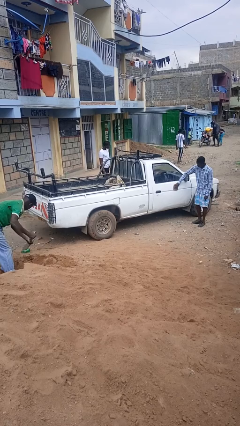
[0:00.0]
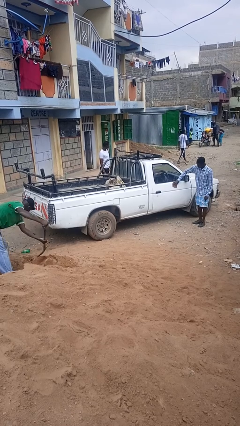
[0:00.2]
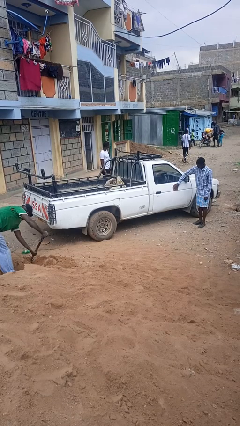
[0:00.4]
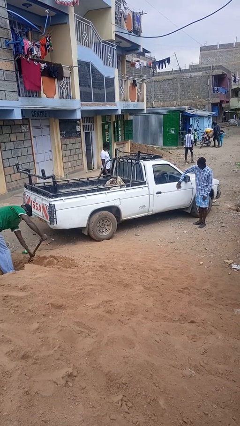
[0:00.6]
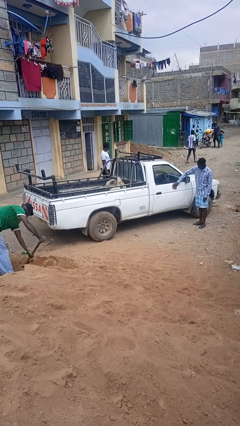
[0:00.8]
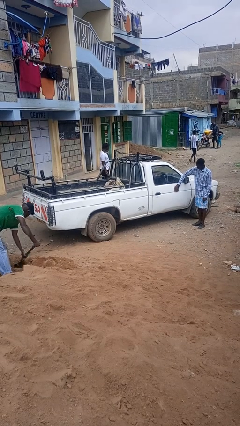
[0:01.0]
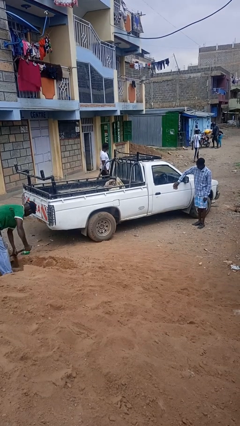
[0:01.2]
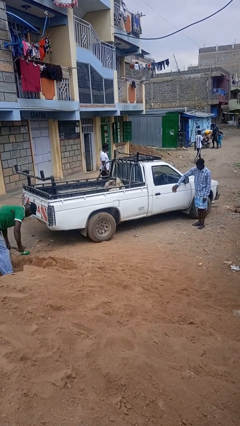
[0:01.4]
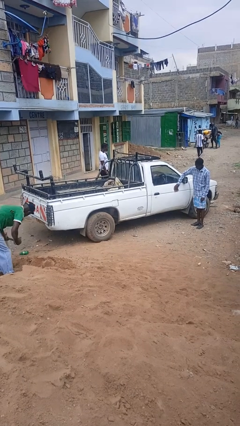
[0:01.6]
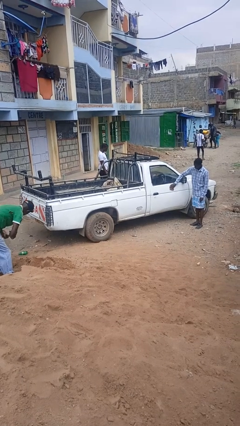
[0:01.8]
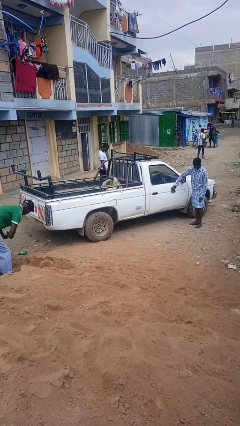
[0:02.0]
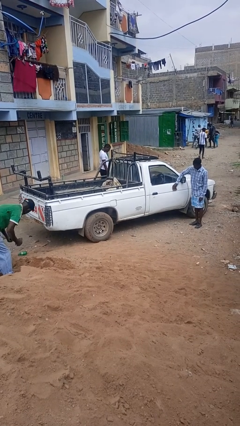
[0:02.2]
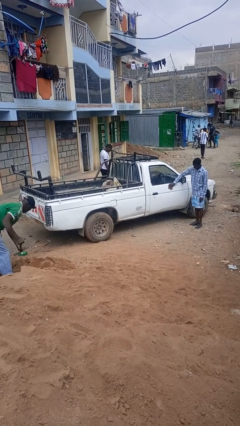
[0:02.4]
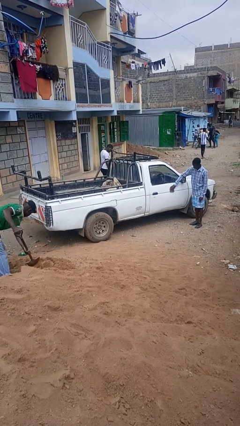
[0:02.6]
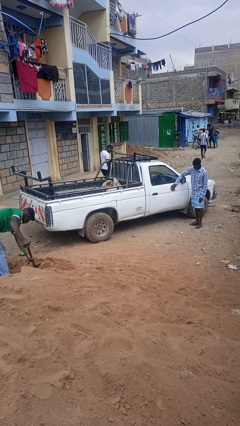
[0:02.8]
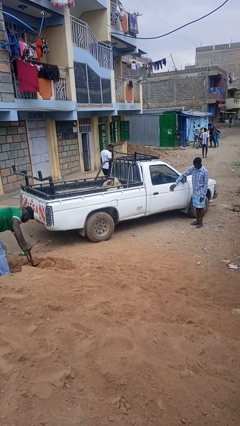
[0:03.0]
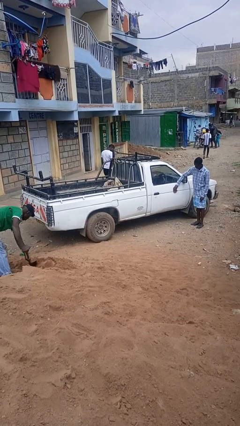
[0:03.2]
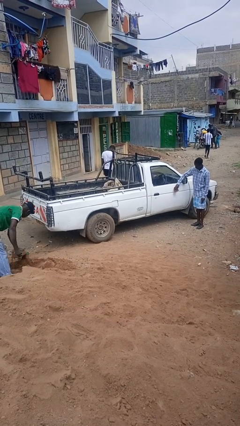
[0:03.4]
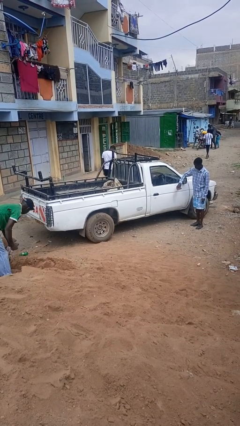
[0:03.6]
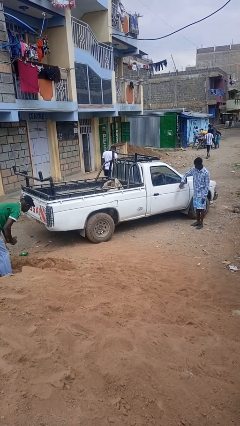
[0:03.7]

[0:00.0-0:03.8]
person polishes car with rag

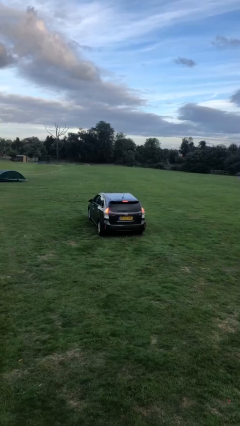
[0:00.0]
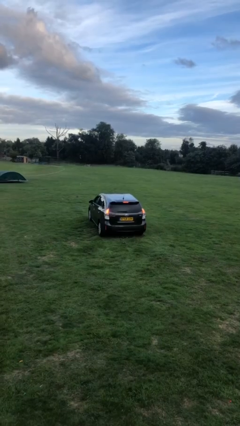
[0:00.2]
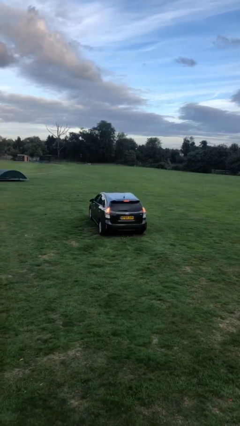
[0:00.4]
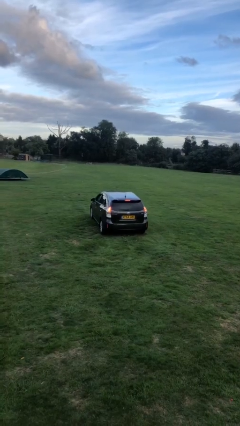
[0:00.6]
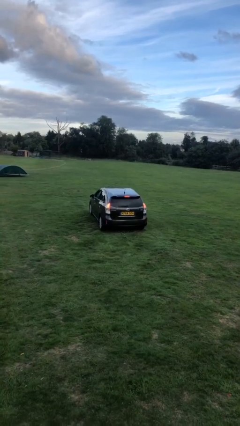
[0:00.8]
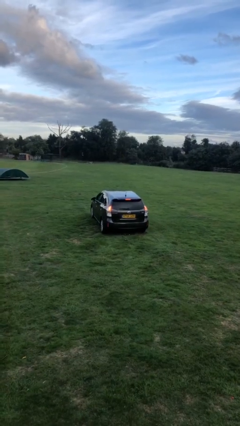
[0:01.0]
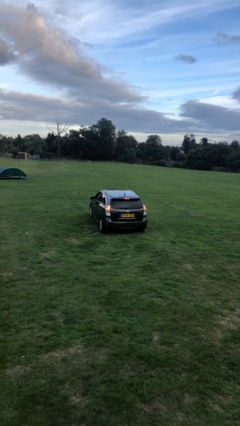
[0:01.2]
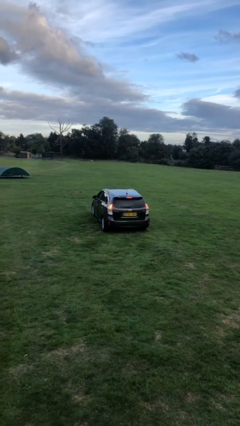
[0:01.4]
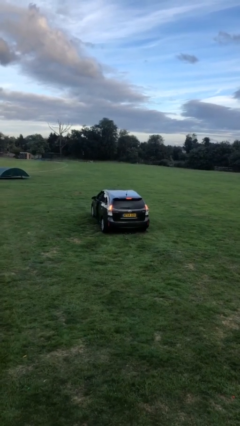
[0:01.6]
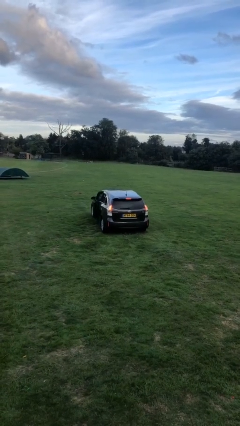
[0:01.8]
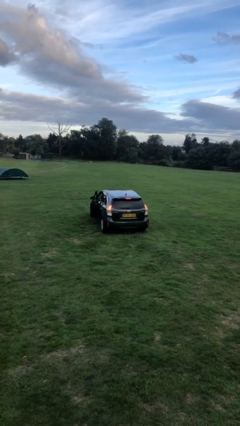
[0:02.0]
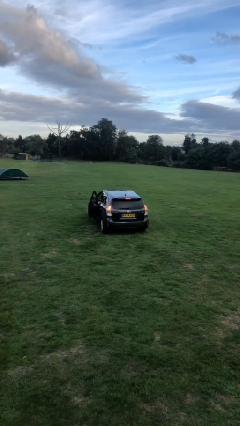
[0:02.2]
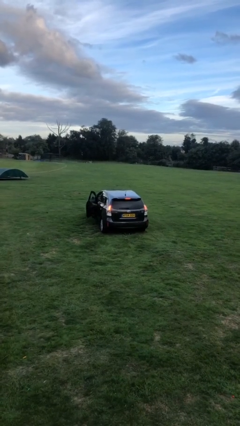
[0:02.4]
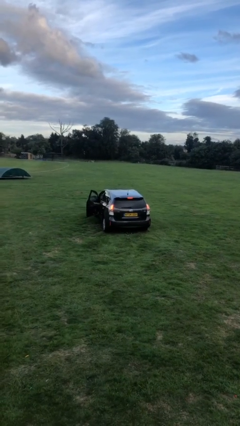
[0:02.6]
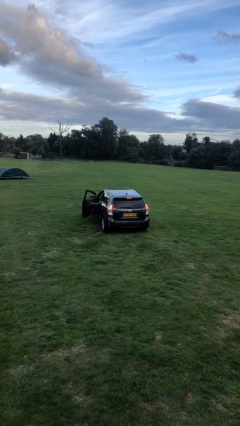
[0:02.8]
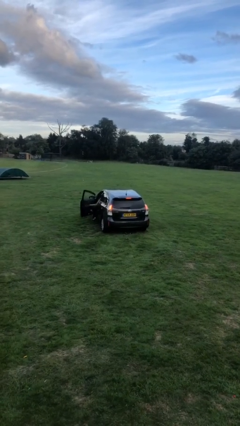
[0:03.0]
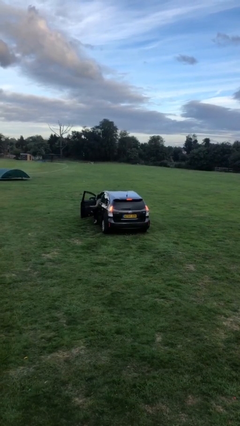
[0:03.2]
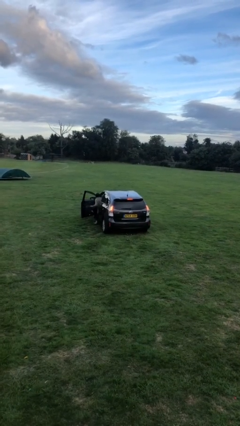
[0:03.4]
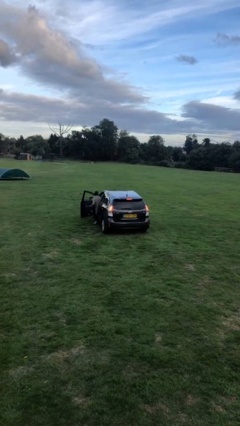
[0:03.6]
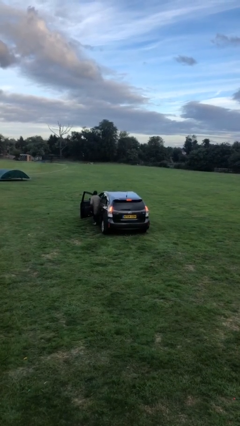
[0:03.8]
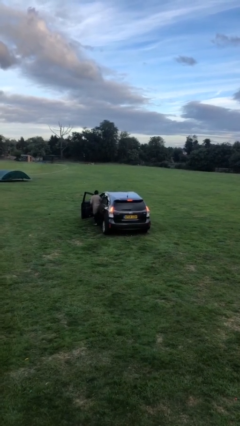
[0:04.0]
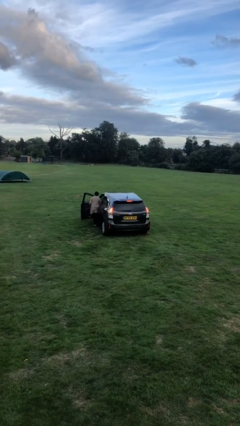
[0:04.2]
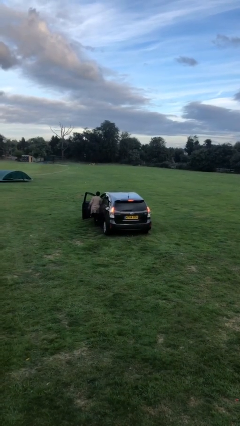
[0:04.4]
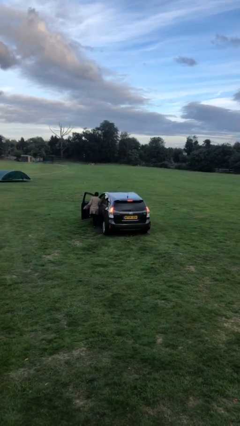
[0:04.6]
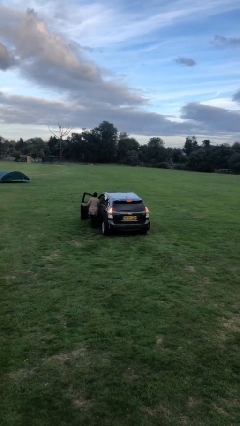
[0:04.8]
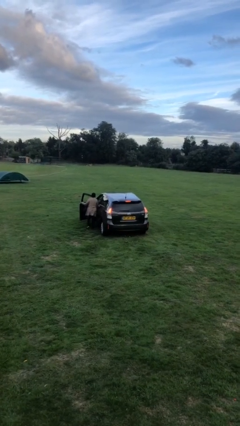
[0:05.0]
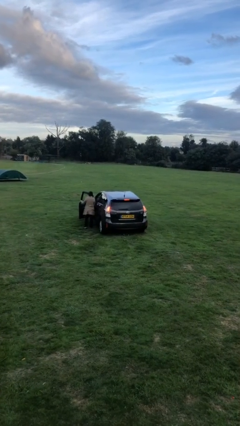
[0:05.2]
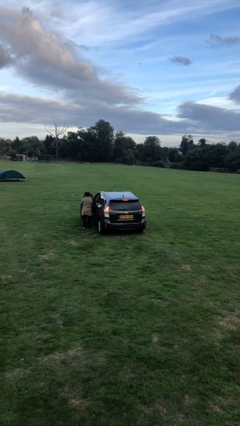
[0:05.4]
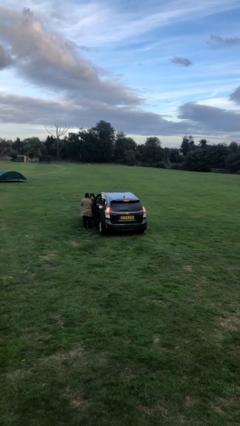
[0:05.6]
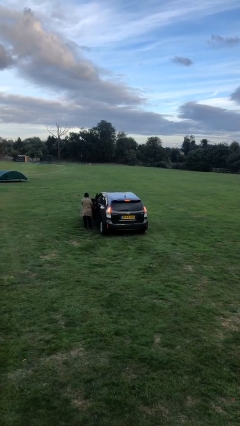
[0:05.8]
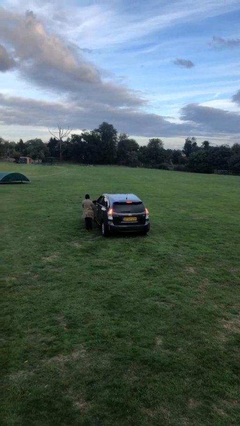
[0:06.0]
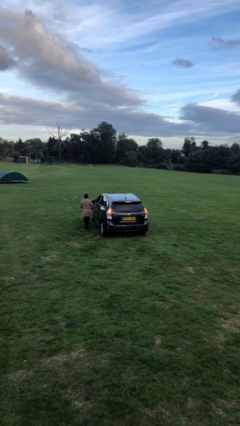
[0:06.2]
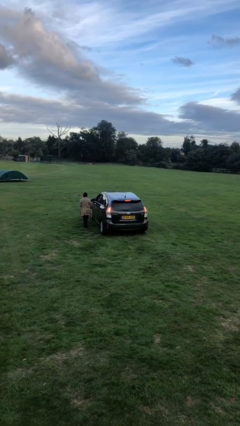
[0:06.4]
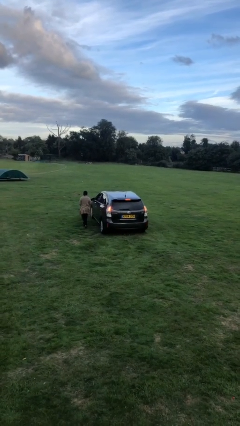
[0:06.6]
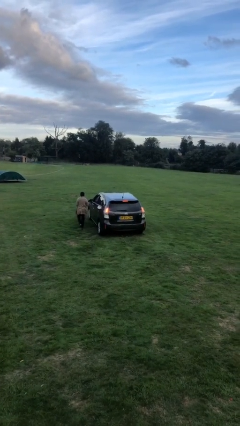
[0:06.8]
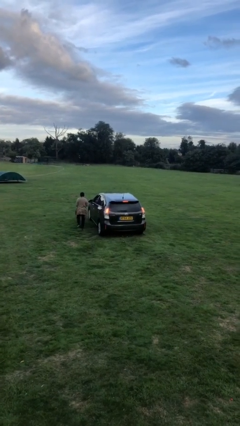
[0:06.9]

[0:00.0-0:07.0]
car drops off person

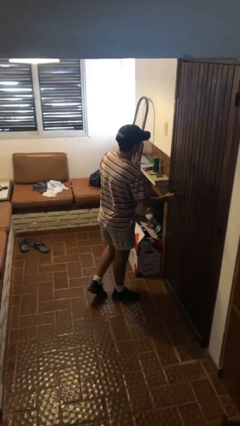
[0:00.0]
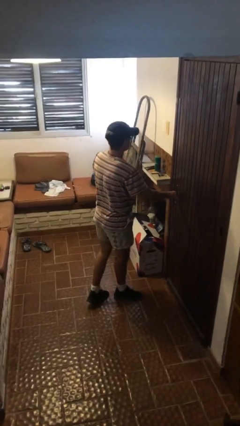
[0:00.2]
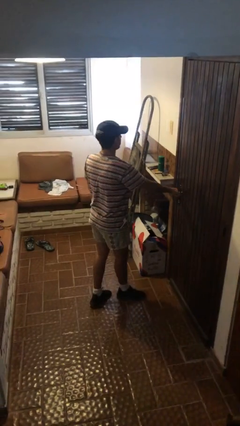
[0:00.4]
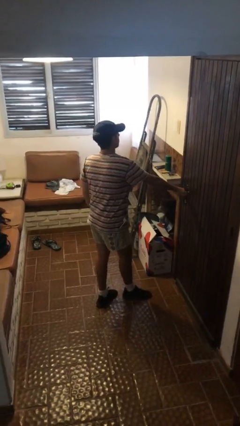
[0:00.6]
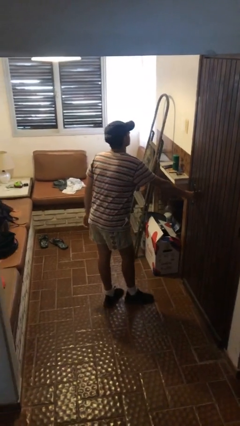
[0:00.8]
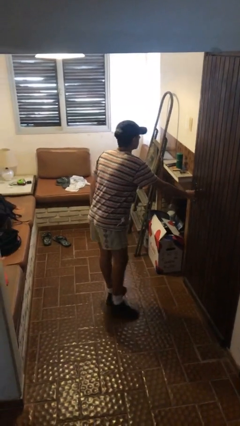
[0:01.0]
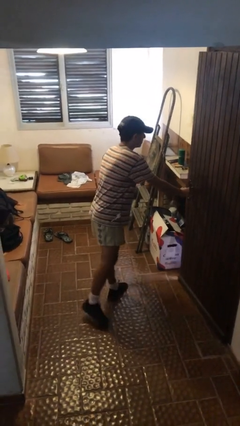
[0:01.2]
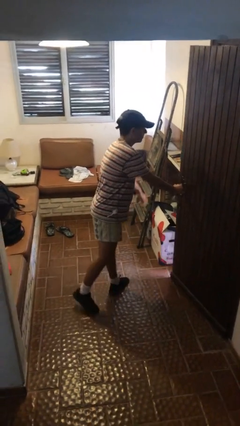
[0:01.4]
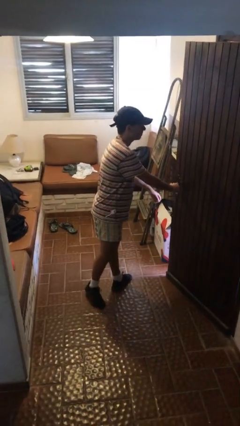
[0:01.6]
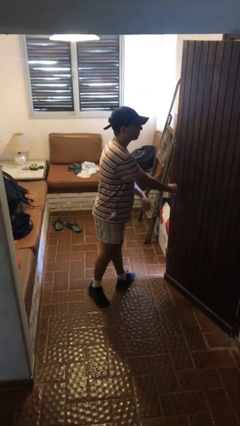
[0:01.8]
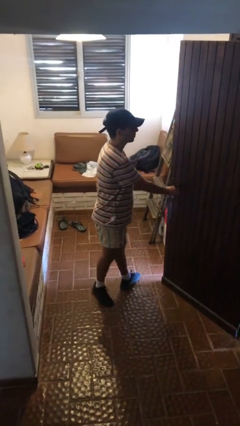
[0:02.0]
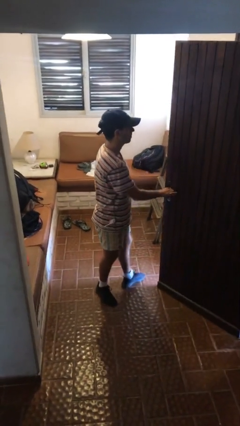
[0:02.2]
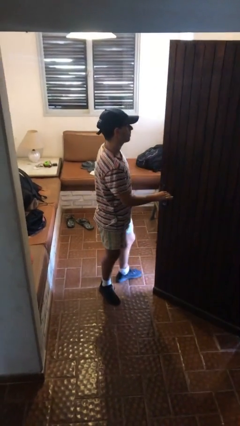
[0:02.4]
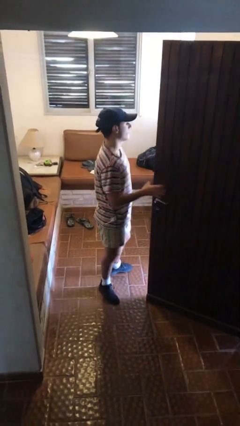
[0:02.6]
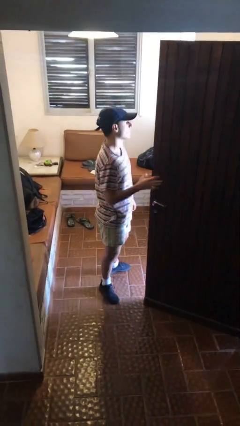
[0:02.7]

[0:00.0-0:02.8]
person opens facility door

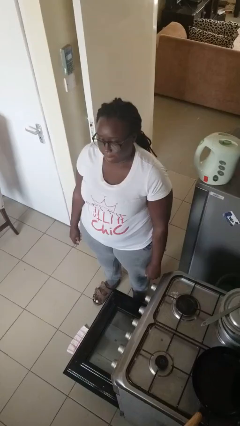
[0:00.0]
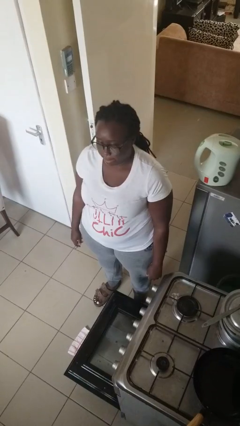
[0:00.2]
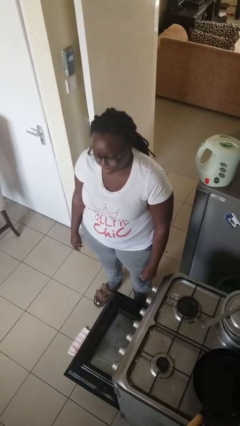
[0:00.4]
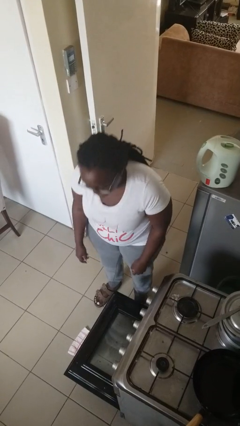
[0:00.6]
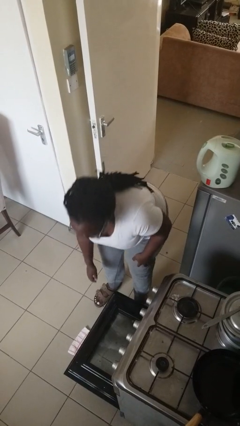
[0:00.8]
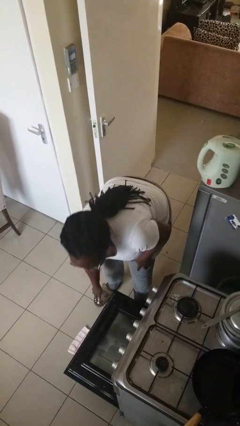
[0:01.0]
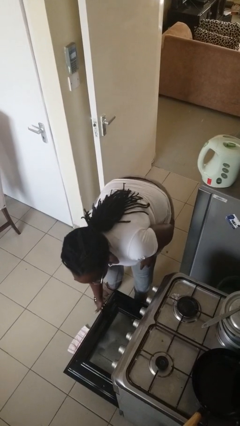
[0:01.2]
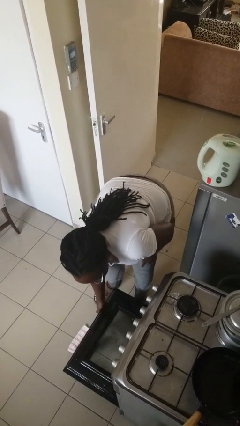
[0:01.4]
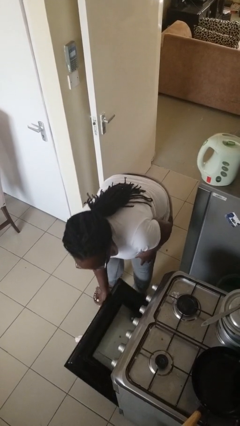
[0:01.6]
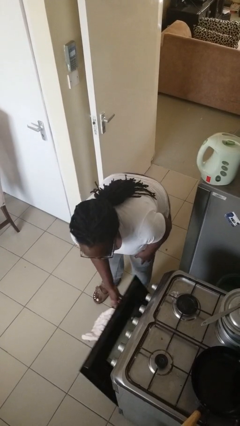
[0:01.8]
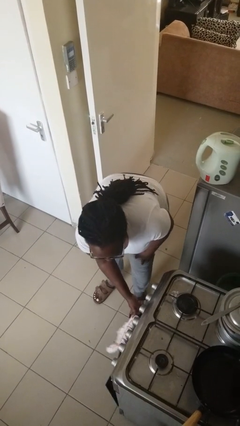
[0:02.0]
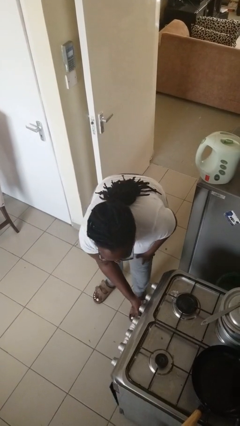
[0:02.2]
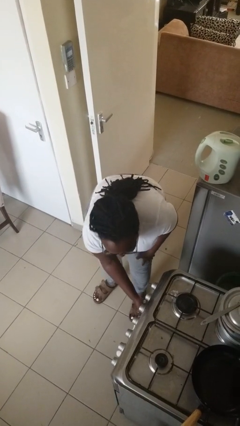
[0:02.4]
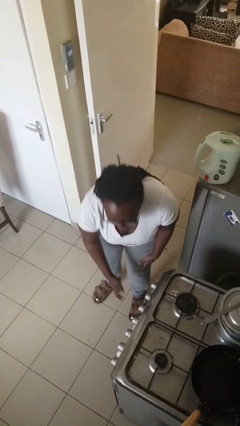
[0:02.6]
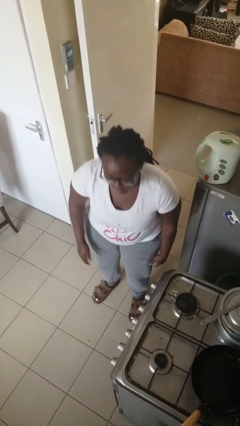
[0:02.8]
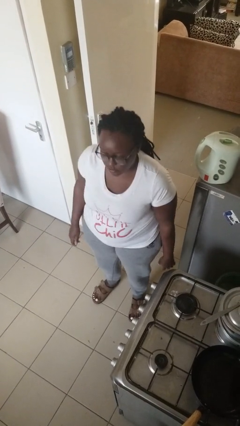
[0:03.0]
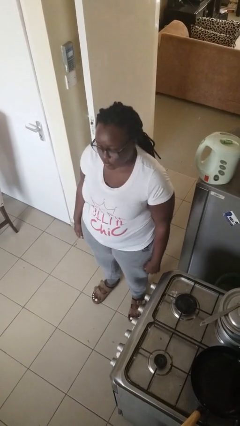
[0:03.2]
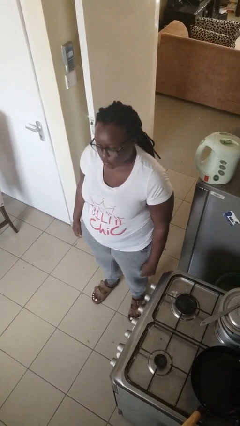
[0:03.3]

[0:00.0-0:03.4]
person closes oven door

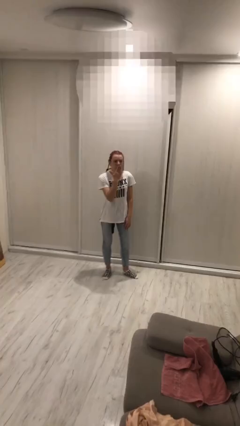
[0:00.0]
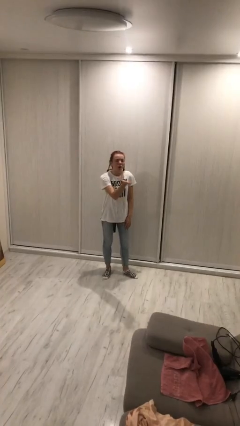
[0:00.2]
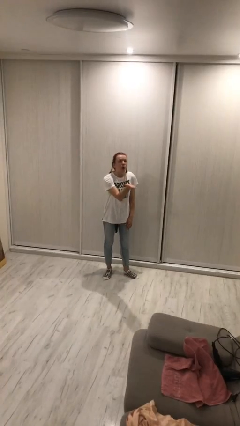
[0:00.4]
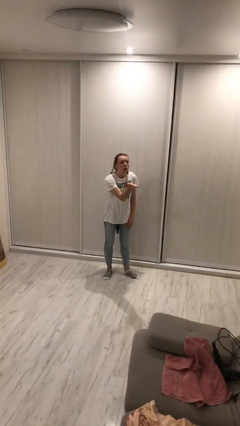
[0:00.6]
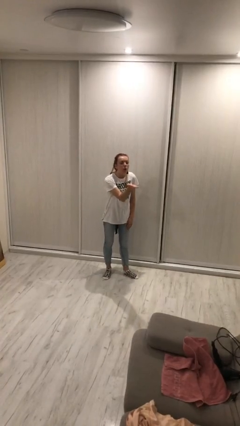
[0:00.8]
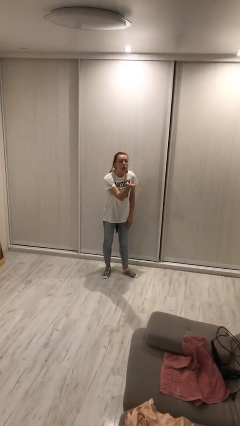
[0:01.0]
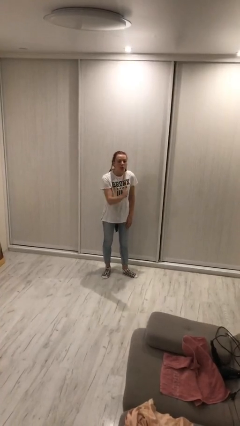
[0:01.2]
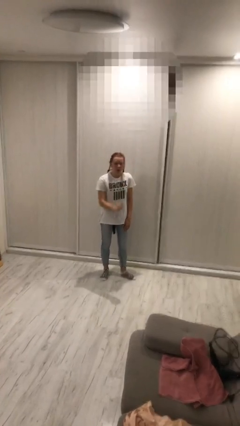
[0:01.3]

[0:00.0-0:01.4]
person gestures blow kiss
